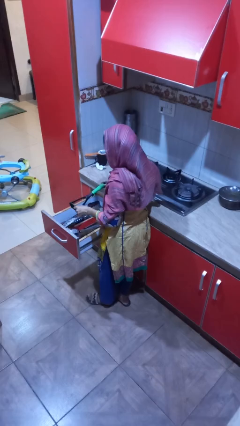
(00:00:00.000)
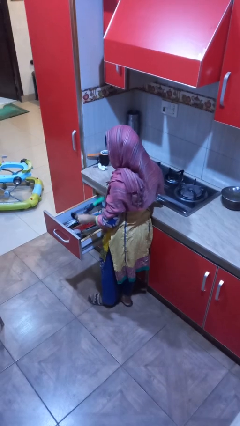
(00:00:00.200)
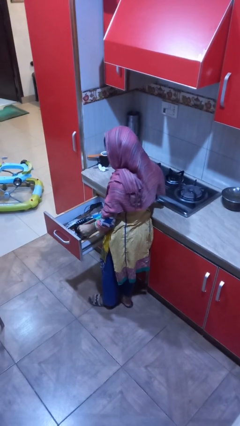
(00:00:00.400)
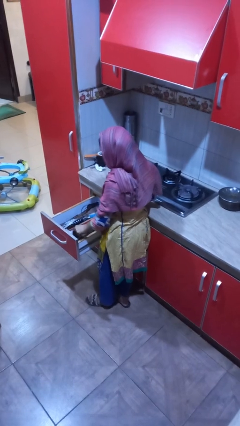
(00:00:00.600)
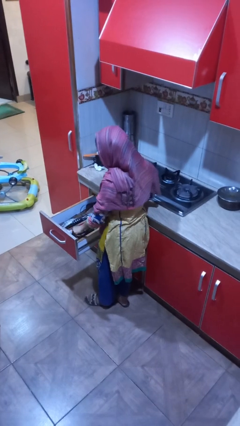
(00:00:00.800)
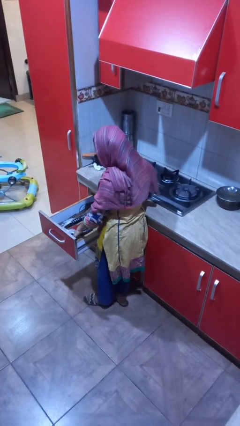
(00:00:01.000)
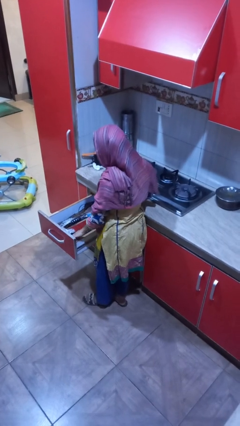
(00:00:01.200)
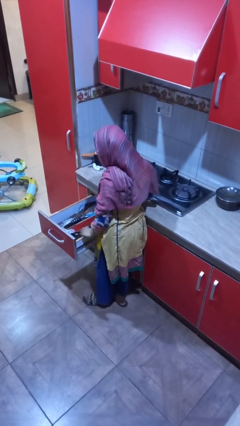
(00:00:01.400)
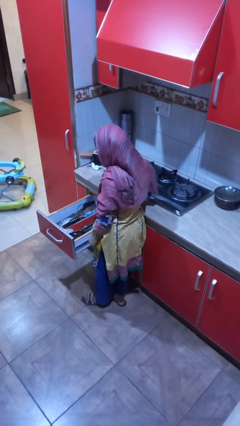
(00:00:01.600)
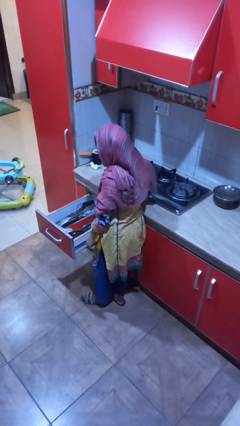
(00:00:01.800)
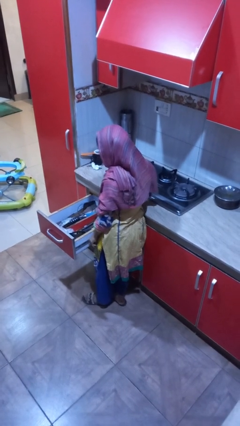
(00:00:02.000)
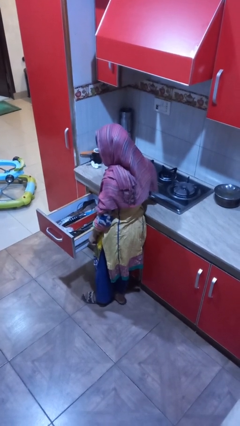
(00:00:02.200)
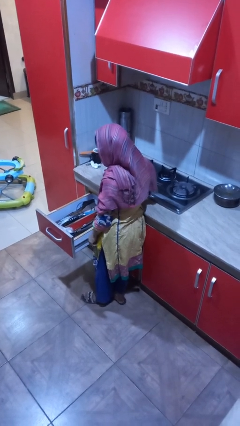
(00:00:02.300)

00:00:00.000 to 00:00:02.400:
person puts object into kitchen drawer

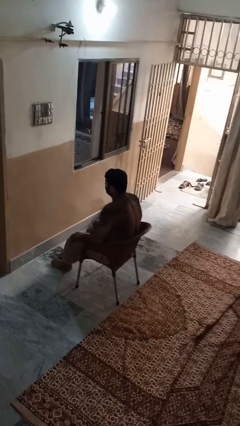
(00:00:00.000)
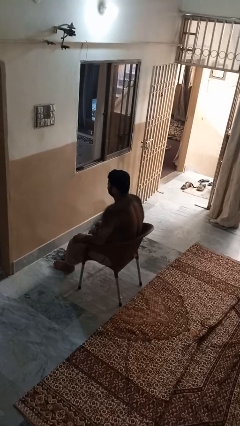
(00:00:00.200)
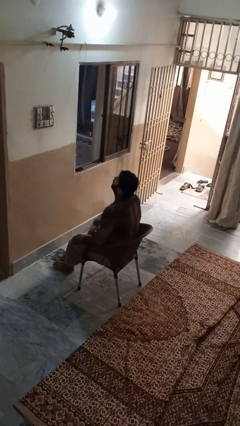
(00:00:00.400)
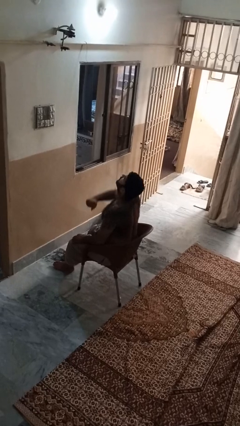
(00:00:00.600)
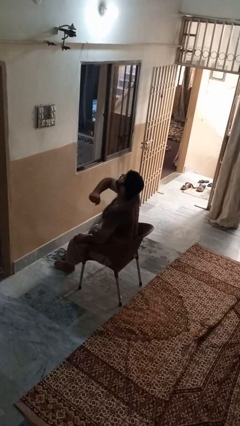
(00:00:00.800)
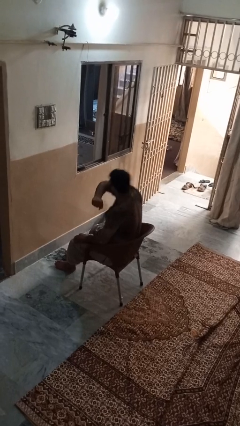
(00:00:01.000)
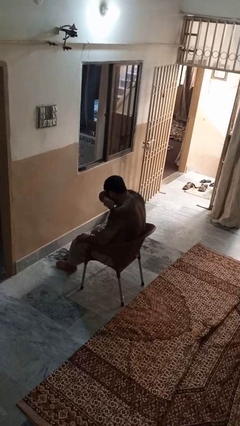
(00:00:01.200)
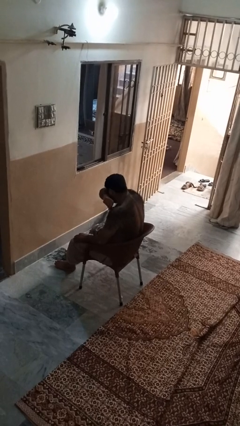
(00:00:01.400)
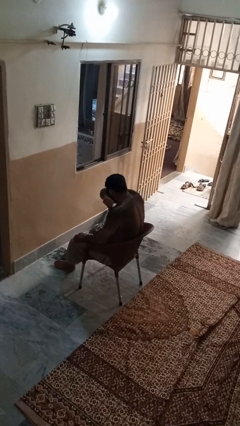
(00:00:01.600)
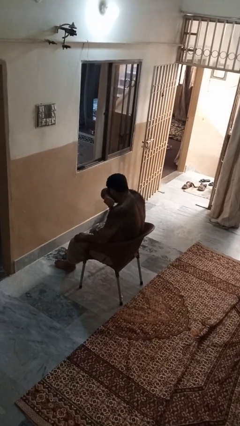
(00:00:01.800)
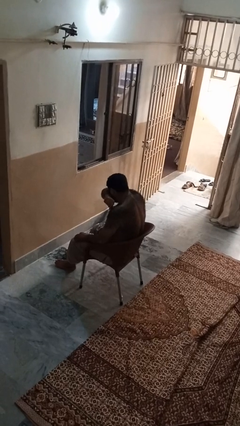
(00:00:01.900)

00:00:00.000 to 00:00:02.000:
person sneezes into arm

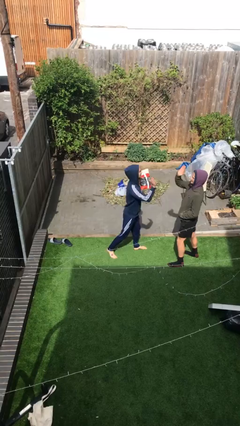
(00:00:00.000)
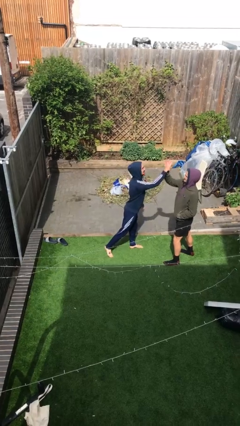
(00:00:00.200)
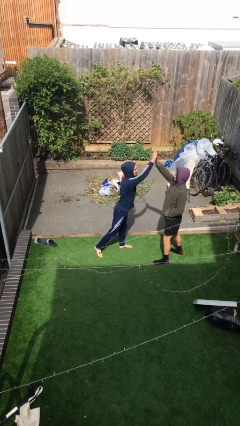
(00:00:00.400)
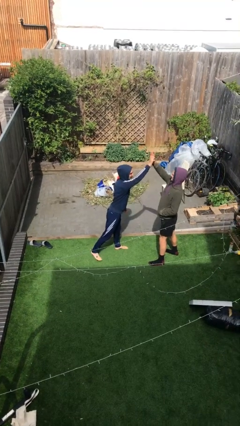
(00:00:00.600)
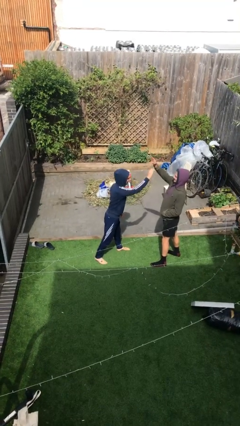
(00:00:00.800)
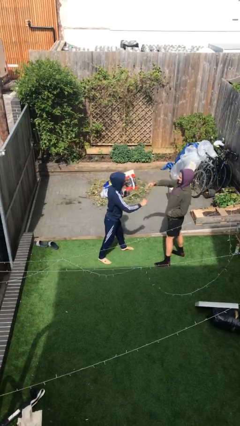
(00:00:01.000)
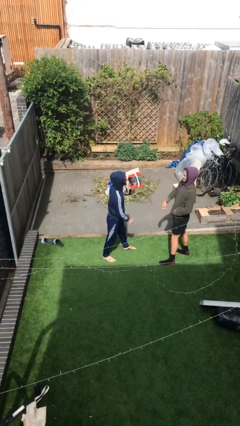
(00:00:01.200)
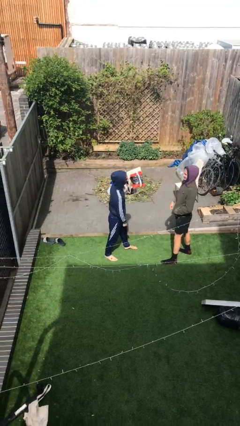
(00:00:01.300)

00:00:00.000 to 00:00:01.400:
person highfives hand

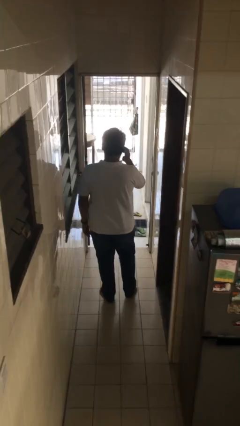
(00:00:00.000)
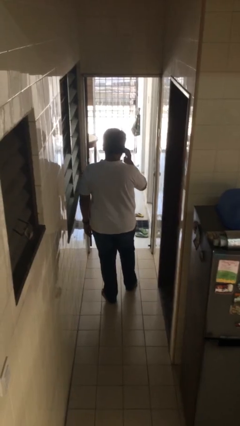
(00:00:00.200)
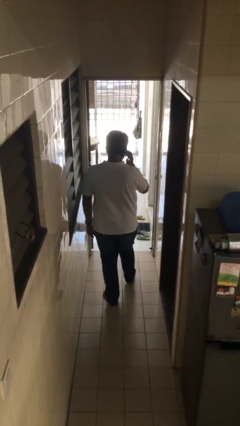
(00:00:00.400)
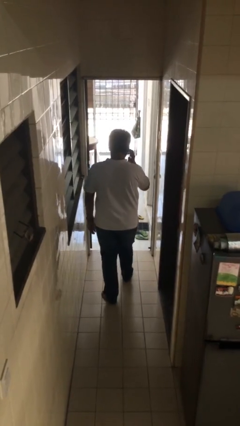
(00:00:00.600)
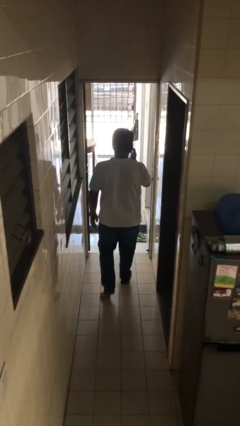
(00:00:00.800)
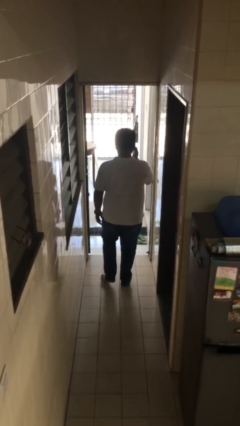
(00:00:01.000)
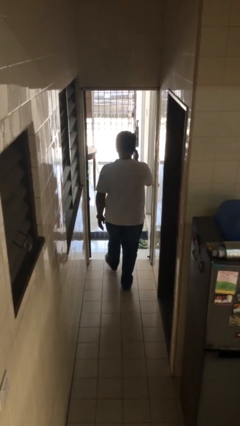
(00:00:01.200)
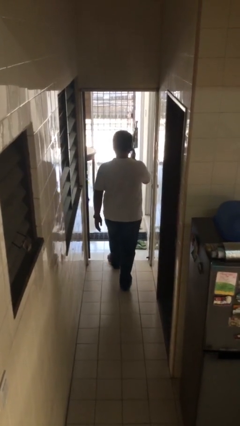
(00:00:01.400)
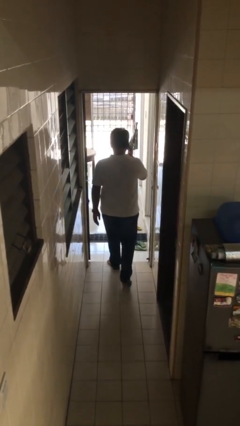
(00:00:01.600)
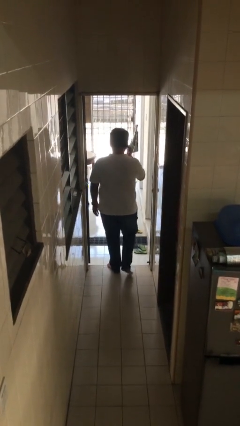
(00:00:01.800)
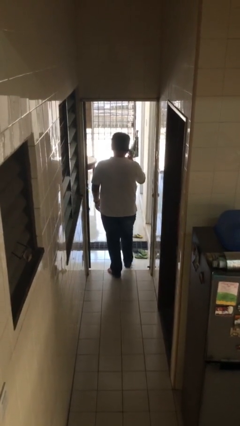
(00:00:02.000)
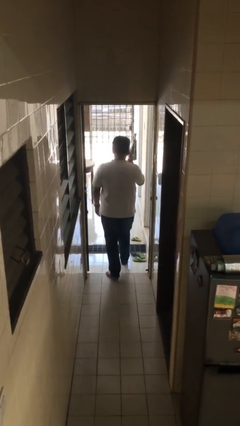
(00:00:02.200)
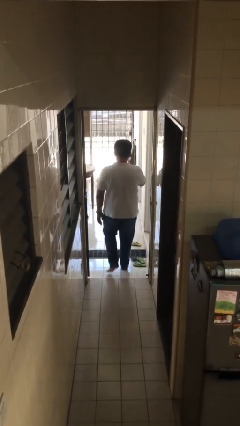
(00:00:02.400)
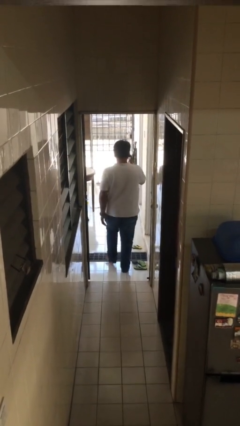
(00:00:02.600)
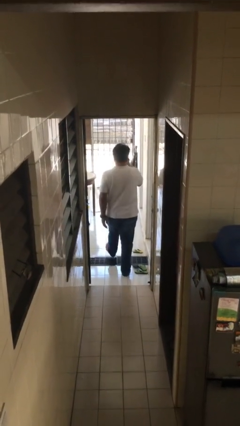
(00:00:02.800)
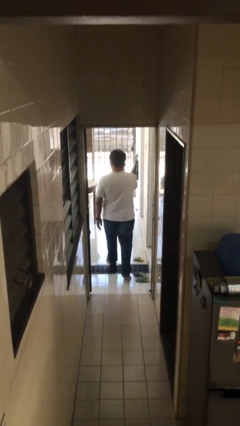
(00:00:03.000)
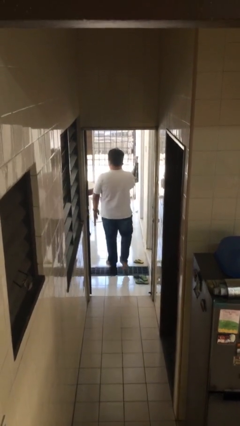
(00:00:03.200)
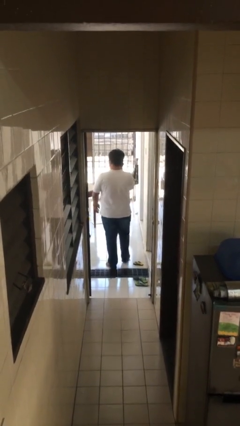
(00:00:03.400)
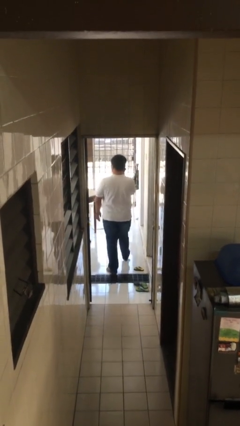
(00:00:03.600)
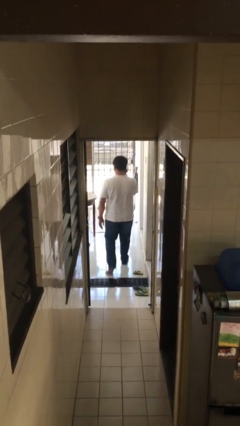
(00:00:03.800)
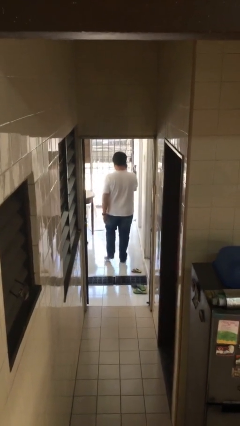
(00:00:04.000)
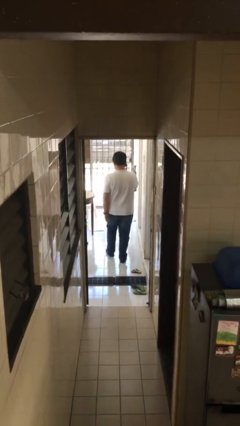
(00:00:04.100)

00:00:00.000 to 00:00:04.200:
person exits scene through structure

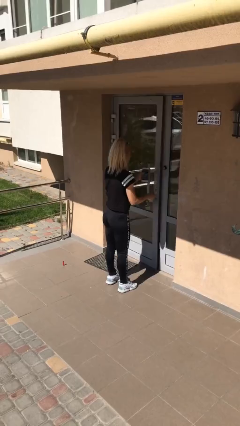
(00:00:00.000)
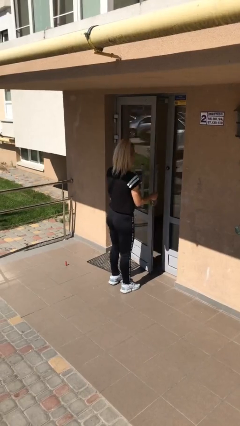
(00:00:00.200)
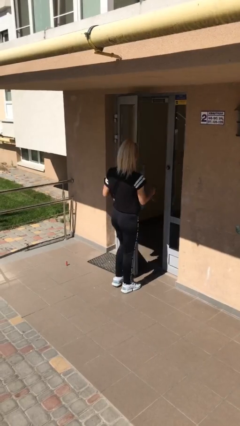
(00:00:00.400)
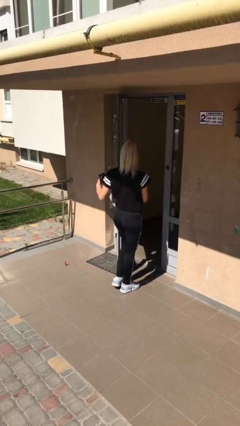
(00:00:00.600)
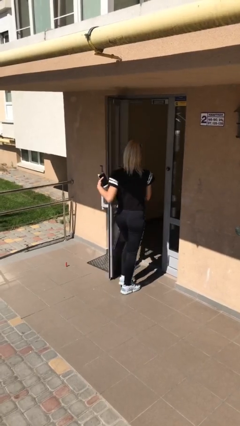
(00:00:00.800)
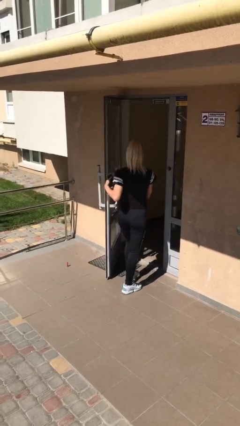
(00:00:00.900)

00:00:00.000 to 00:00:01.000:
person opens facility door

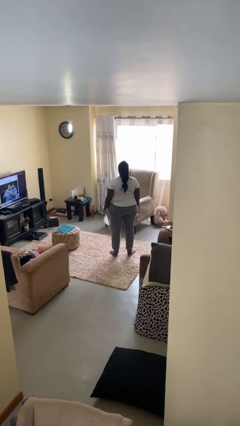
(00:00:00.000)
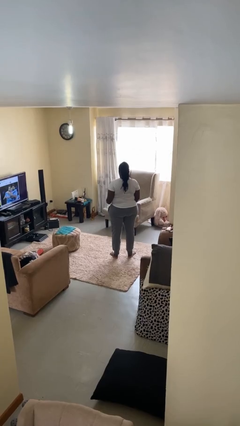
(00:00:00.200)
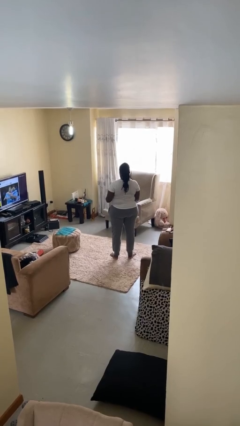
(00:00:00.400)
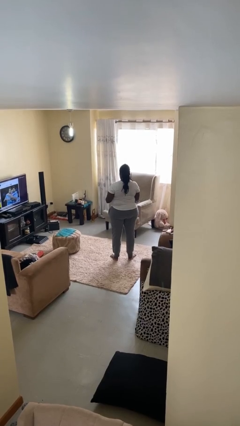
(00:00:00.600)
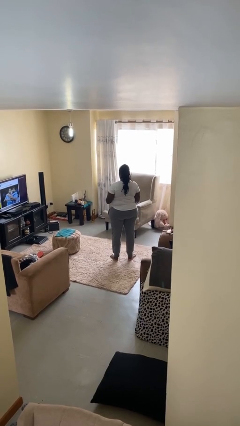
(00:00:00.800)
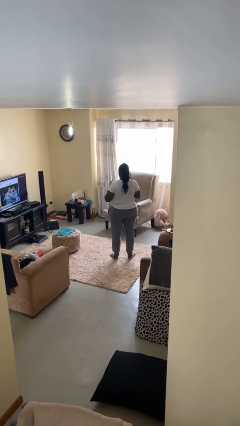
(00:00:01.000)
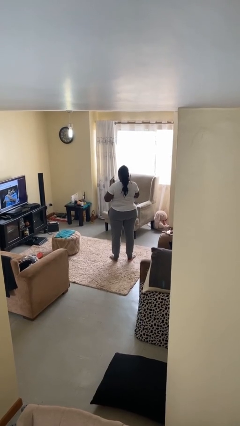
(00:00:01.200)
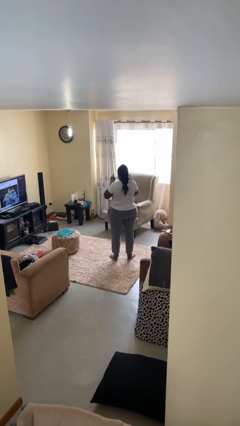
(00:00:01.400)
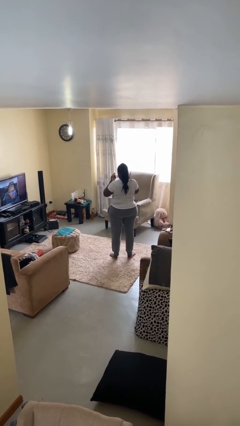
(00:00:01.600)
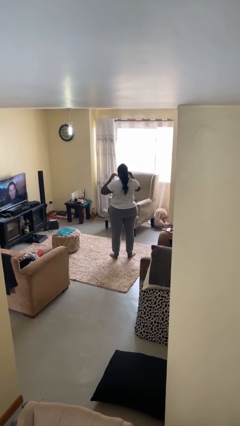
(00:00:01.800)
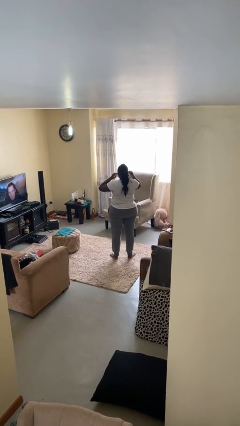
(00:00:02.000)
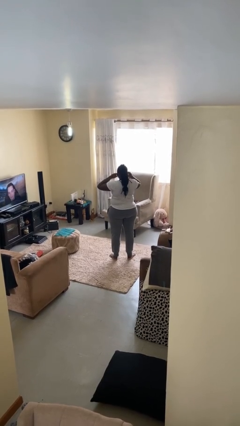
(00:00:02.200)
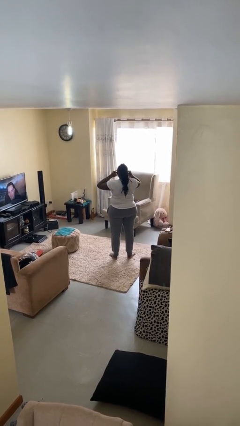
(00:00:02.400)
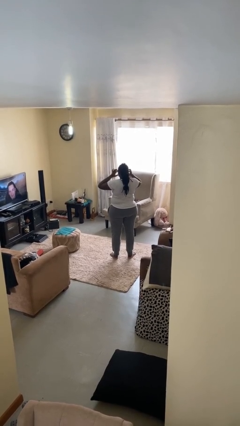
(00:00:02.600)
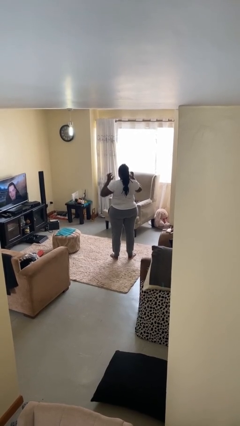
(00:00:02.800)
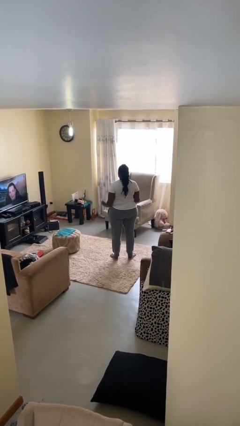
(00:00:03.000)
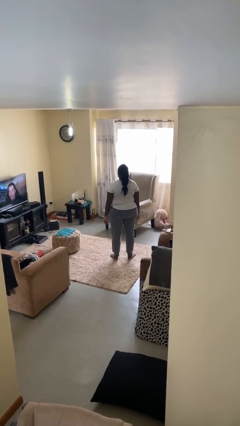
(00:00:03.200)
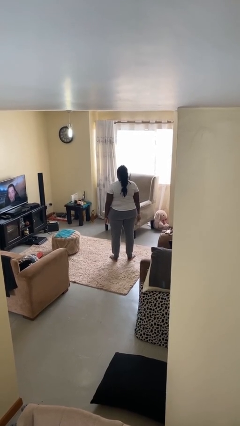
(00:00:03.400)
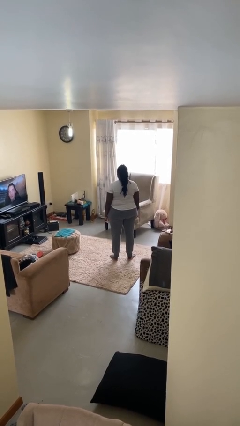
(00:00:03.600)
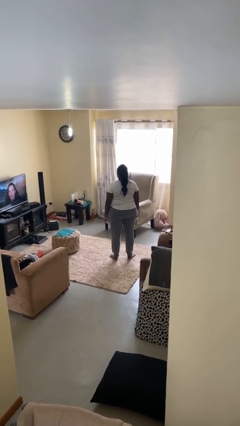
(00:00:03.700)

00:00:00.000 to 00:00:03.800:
person puts on facemask

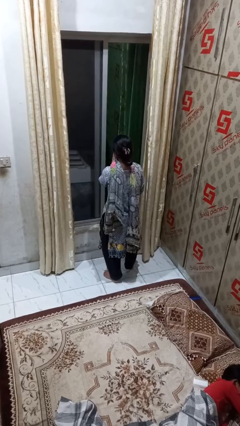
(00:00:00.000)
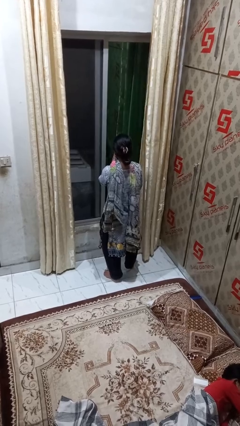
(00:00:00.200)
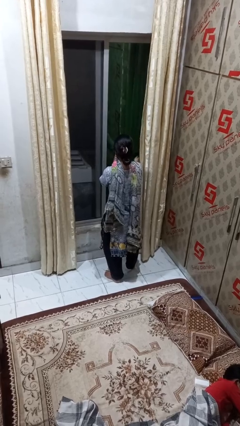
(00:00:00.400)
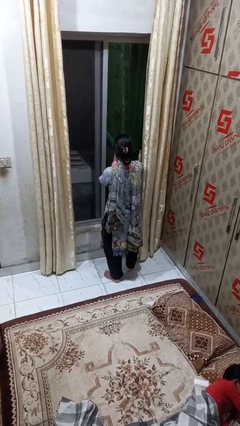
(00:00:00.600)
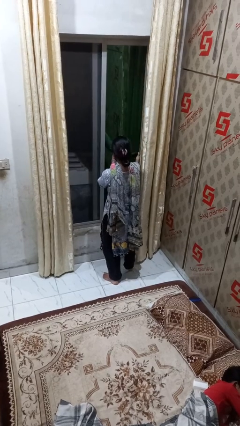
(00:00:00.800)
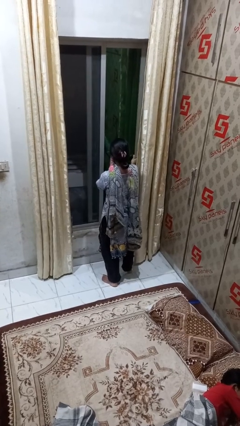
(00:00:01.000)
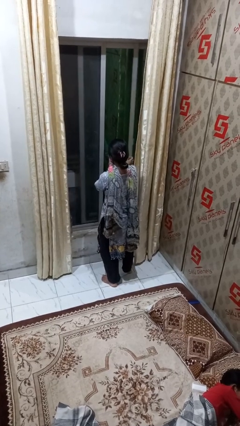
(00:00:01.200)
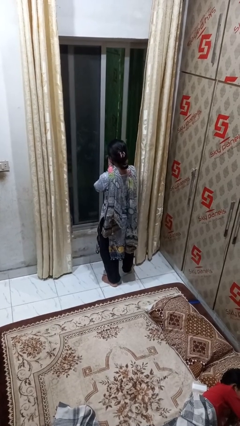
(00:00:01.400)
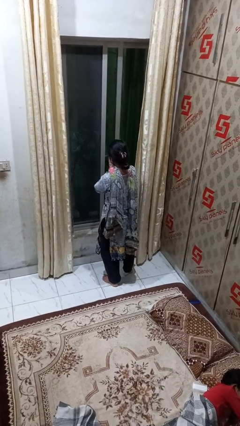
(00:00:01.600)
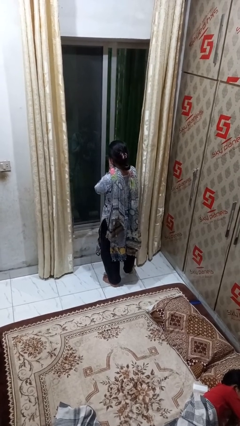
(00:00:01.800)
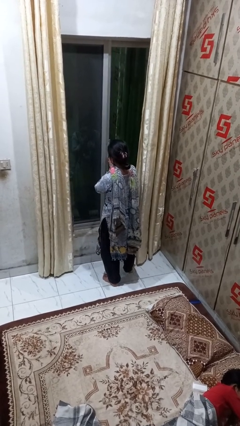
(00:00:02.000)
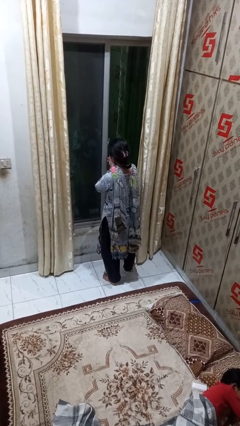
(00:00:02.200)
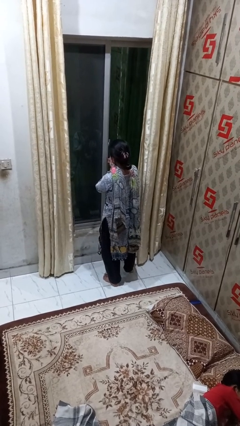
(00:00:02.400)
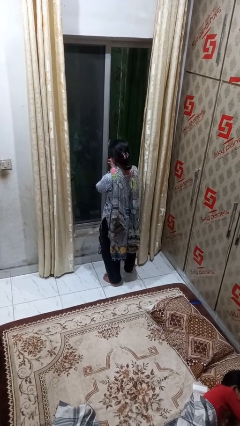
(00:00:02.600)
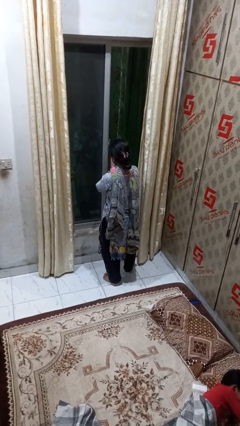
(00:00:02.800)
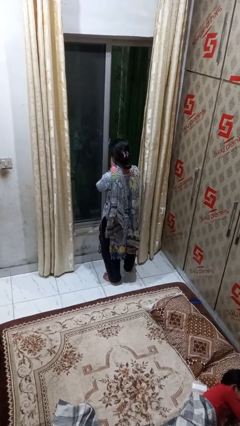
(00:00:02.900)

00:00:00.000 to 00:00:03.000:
person closes home window
